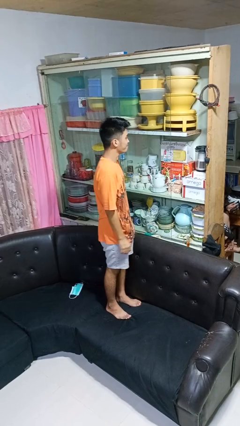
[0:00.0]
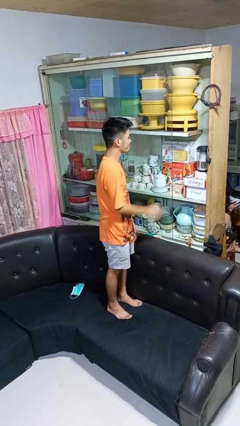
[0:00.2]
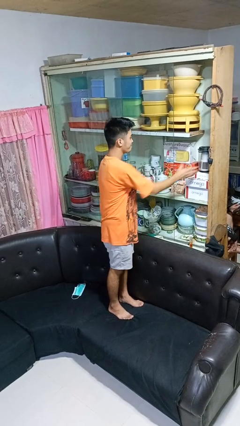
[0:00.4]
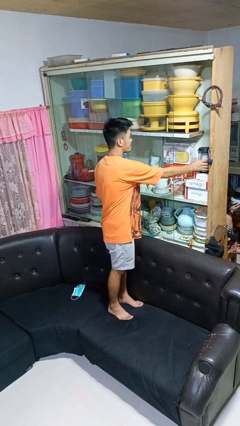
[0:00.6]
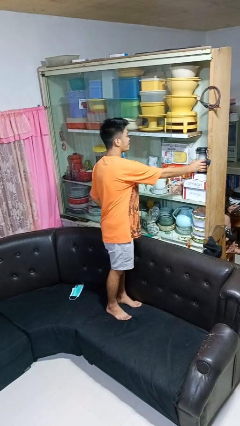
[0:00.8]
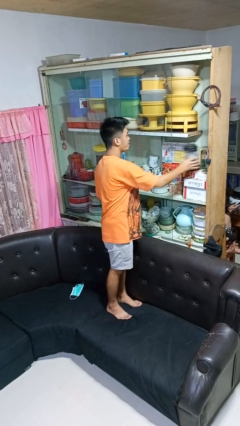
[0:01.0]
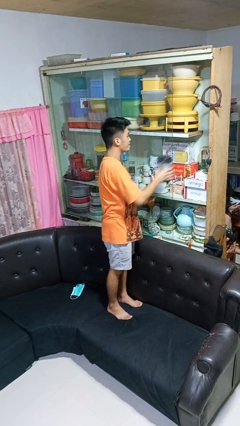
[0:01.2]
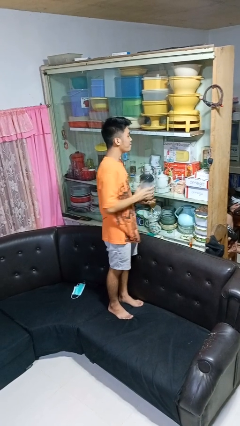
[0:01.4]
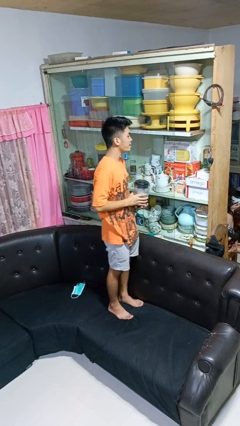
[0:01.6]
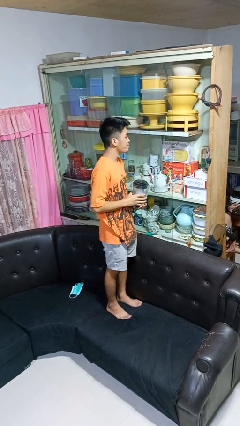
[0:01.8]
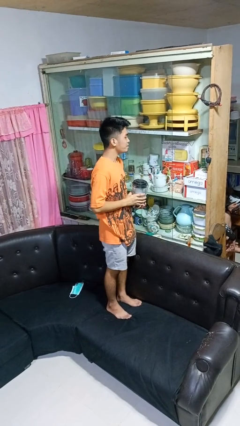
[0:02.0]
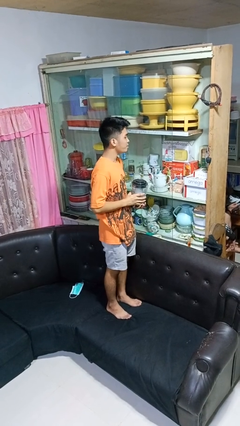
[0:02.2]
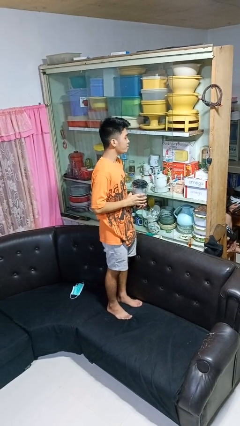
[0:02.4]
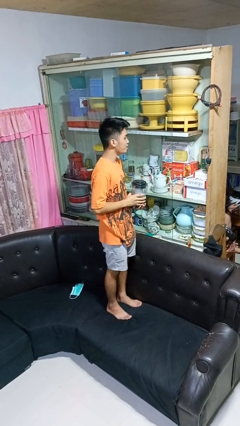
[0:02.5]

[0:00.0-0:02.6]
person picks up object from cabinet

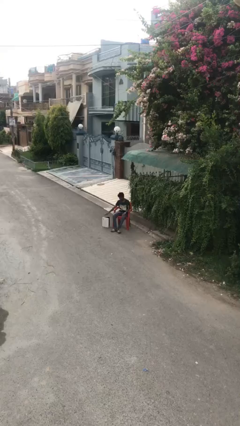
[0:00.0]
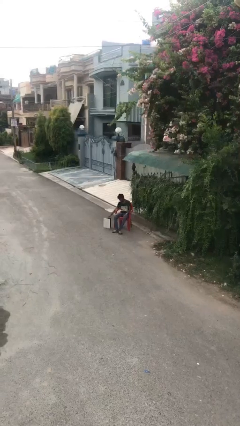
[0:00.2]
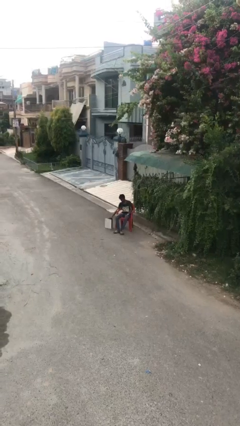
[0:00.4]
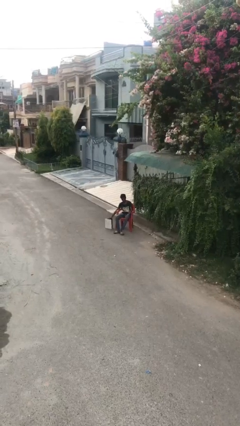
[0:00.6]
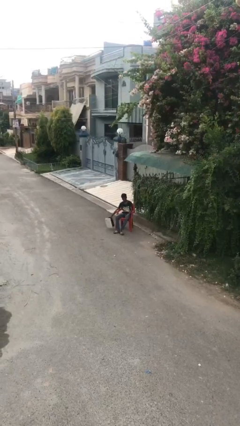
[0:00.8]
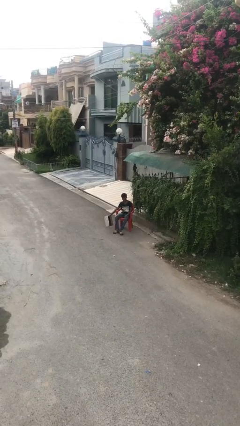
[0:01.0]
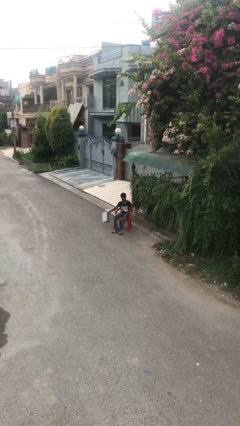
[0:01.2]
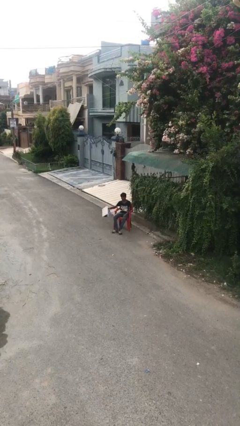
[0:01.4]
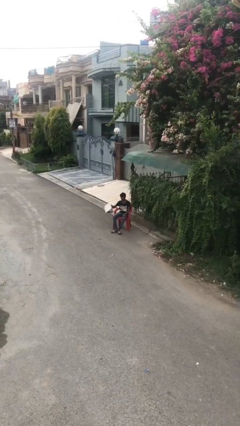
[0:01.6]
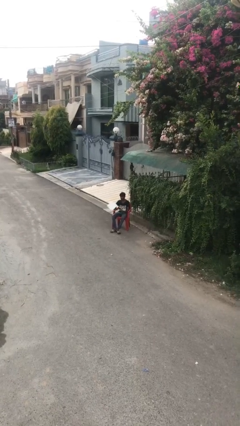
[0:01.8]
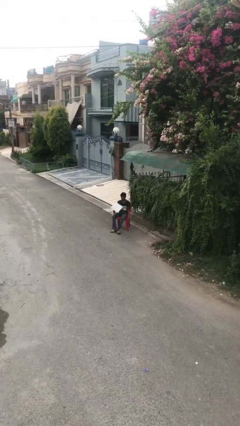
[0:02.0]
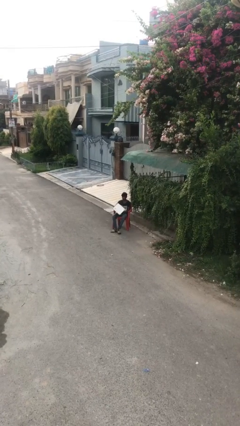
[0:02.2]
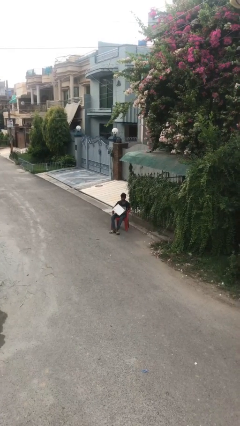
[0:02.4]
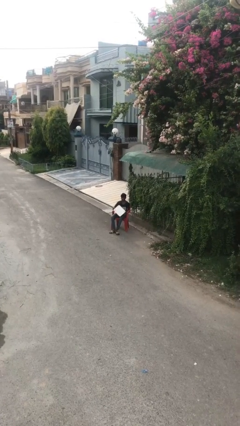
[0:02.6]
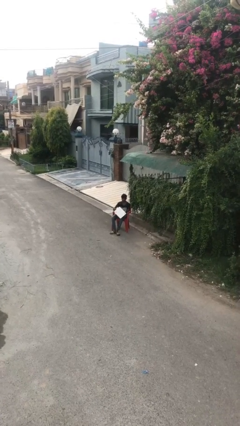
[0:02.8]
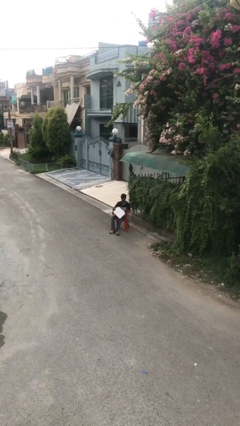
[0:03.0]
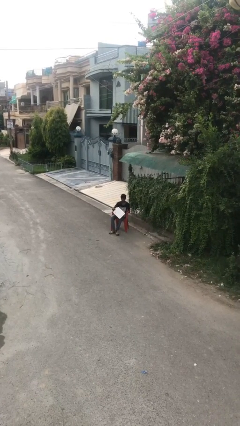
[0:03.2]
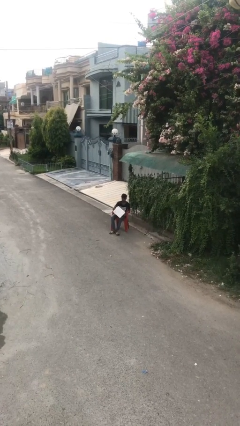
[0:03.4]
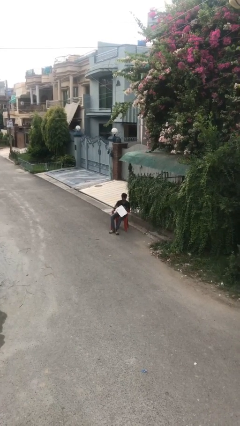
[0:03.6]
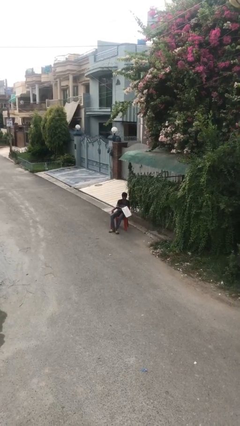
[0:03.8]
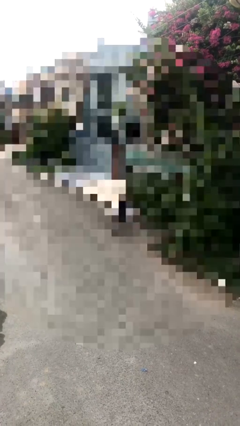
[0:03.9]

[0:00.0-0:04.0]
person picks up object from floor

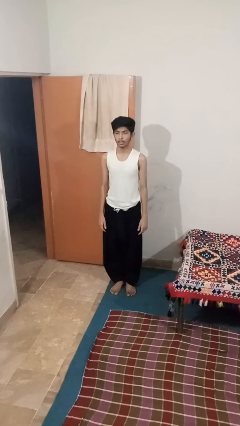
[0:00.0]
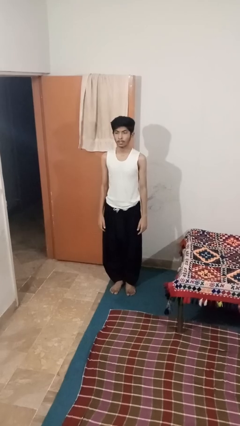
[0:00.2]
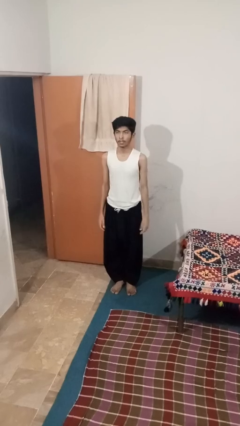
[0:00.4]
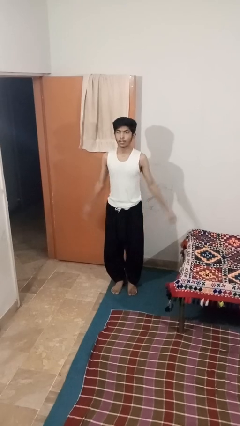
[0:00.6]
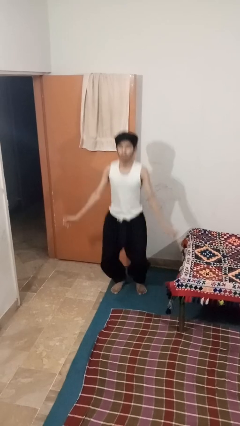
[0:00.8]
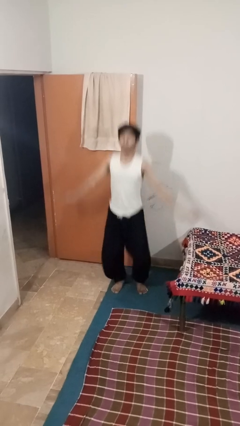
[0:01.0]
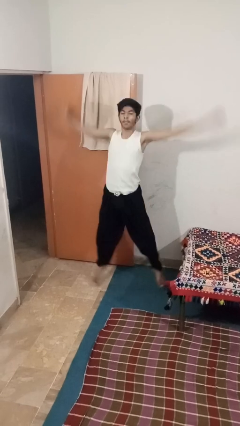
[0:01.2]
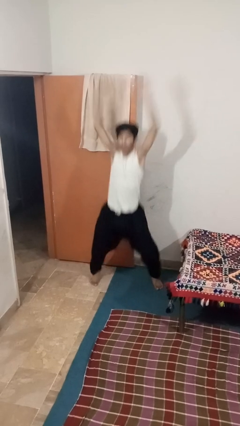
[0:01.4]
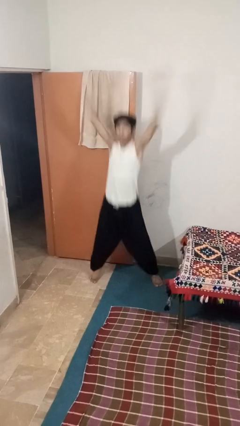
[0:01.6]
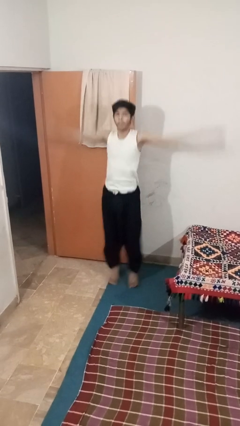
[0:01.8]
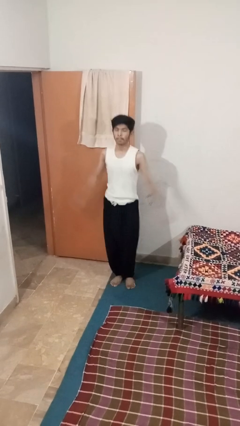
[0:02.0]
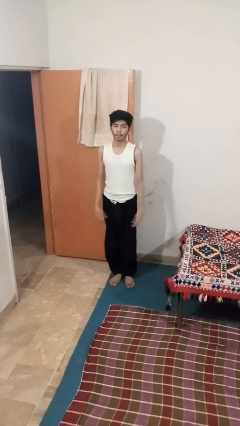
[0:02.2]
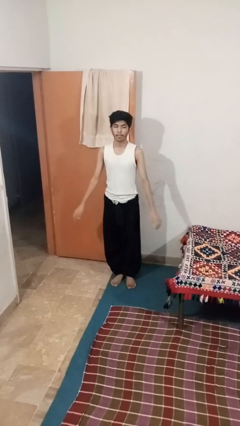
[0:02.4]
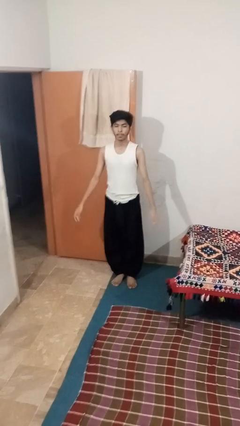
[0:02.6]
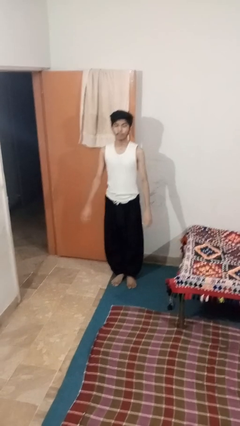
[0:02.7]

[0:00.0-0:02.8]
person exercises with jumping jacks

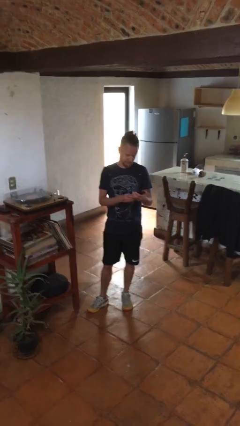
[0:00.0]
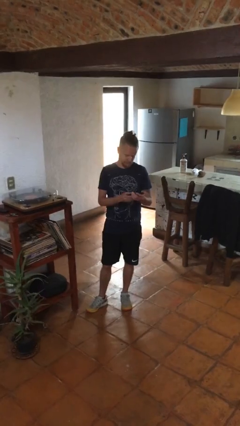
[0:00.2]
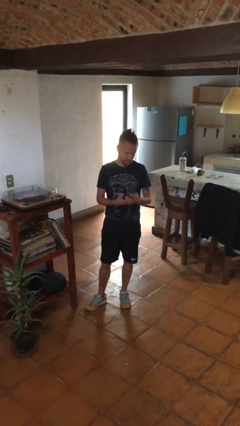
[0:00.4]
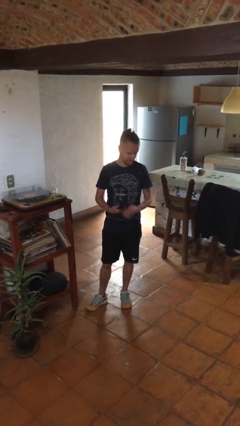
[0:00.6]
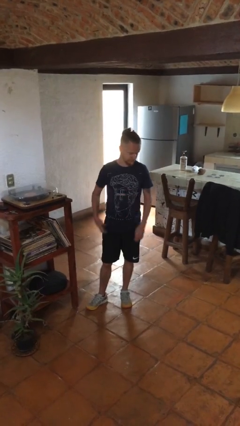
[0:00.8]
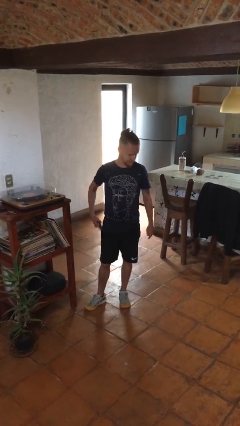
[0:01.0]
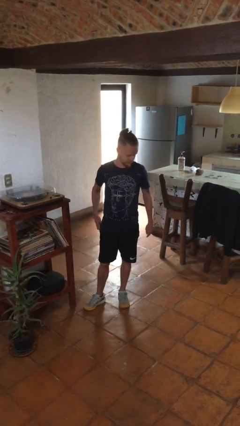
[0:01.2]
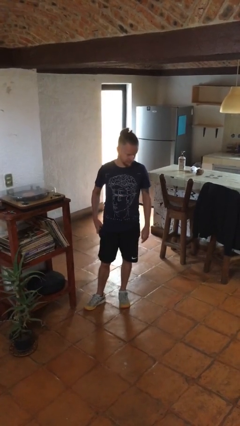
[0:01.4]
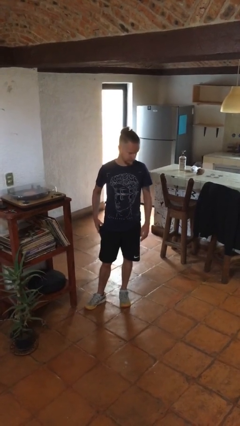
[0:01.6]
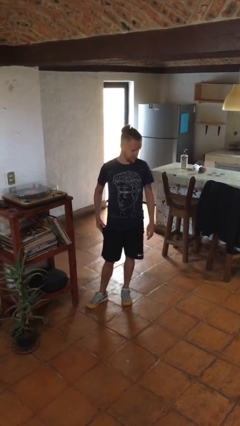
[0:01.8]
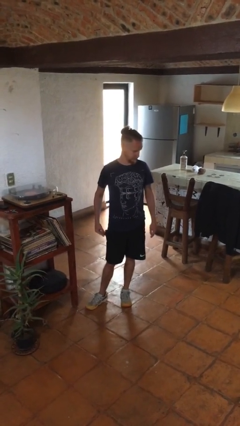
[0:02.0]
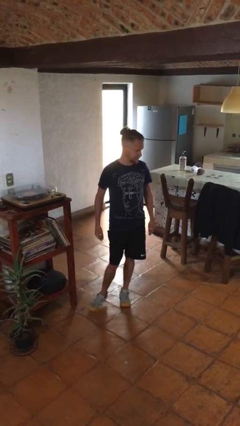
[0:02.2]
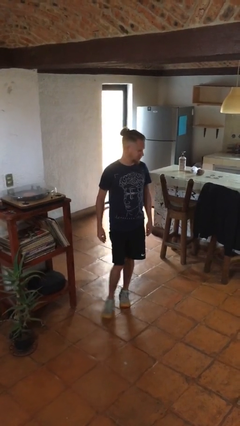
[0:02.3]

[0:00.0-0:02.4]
person puts phone into pocket

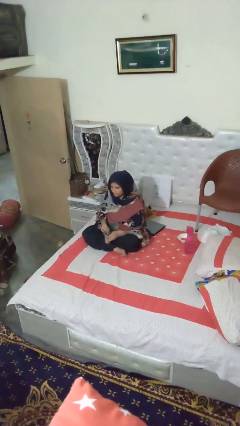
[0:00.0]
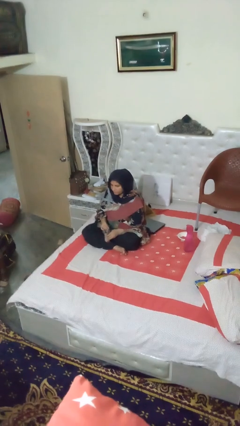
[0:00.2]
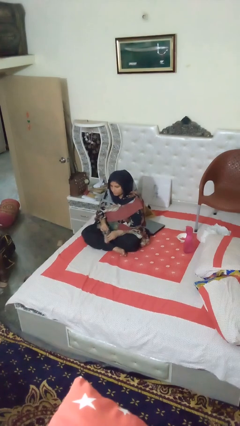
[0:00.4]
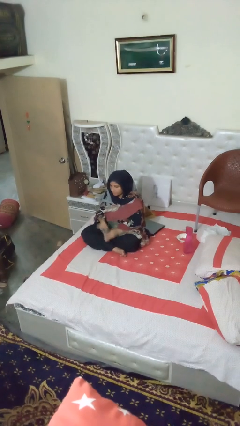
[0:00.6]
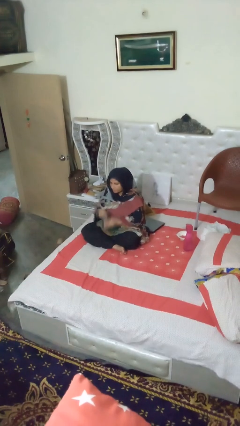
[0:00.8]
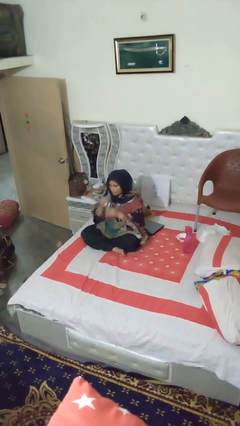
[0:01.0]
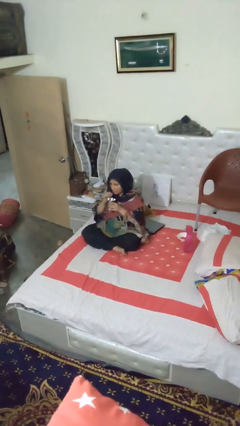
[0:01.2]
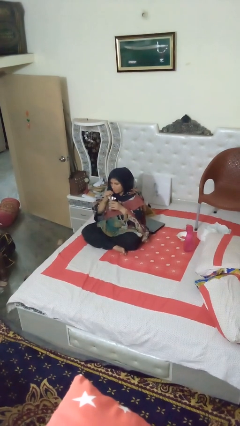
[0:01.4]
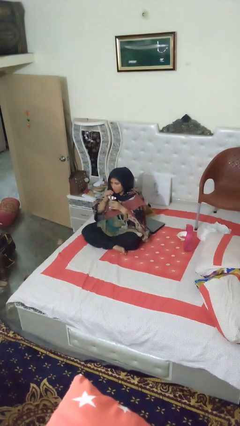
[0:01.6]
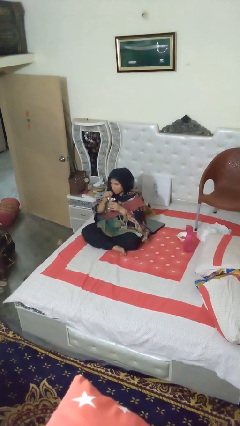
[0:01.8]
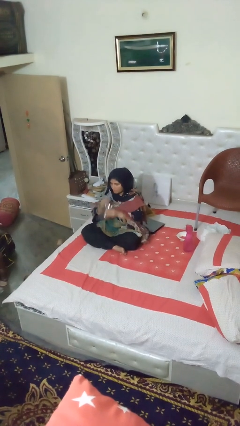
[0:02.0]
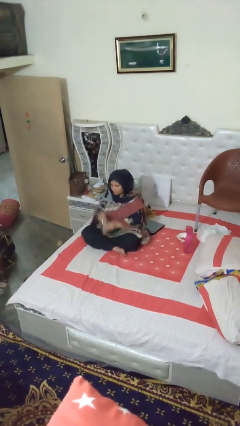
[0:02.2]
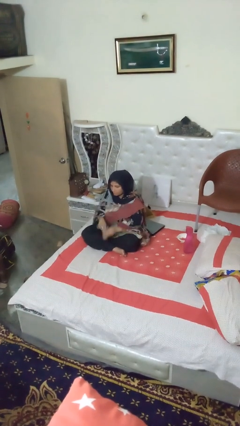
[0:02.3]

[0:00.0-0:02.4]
person drinks from straw

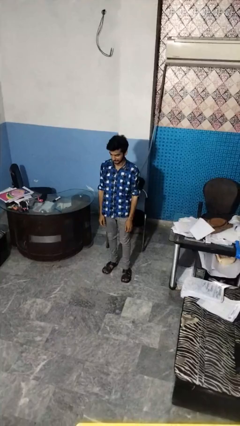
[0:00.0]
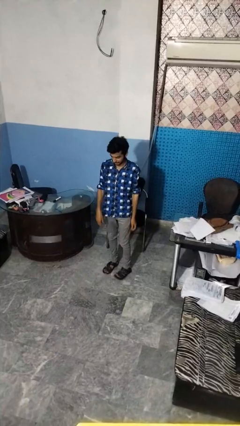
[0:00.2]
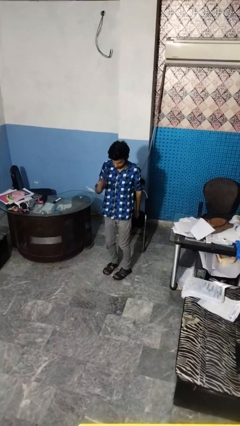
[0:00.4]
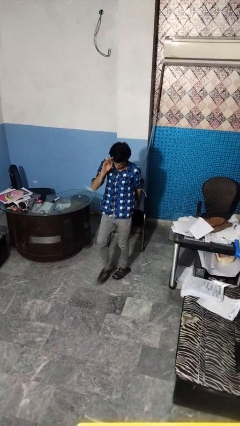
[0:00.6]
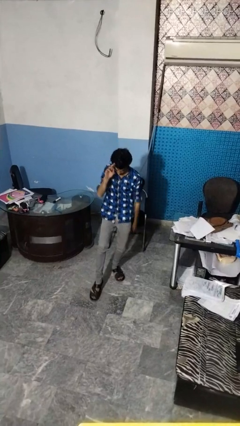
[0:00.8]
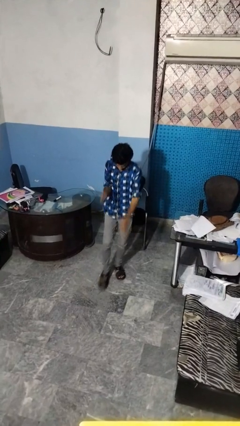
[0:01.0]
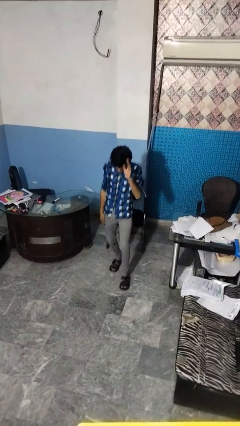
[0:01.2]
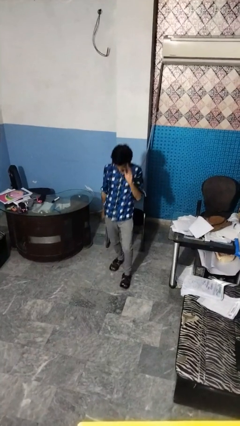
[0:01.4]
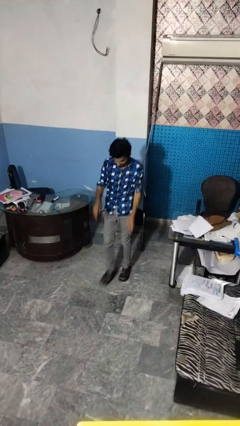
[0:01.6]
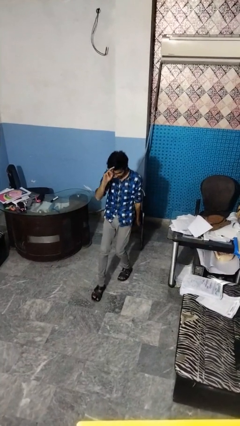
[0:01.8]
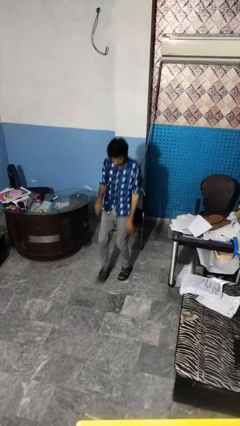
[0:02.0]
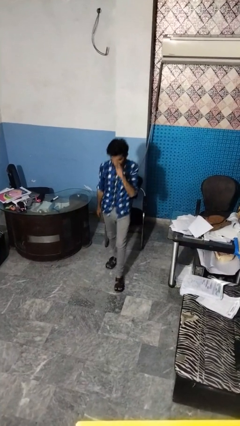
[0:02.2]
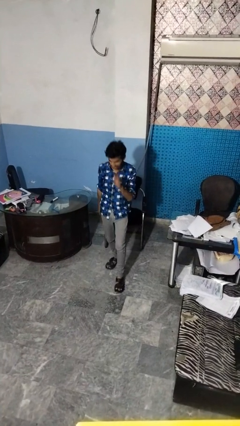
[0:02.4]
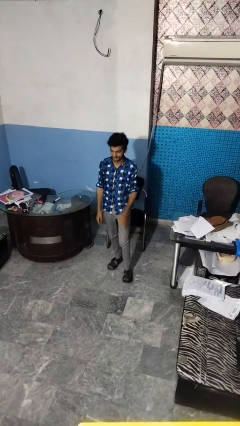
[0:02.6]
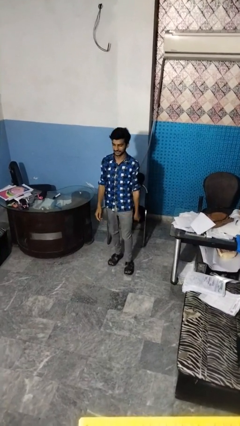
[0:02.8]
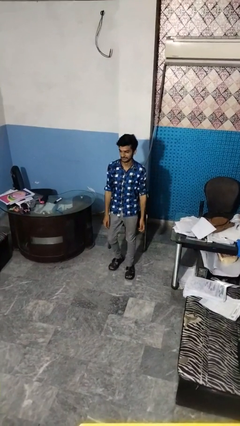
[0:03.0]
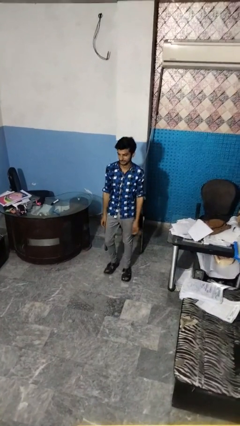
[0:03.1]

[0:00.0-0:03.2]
person dances in place

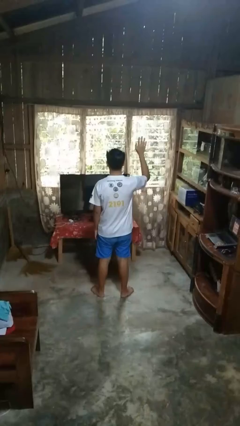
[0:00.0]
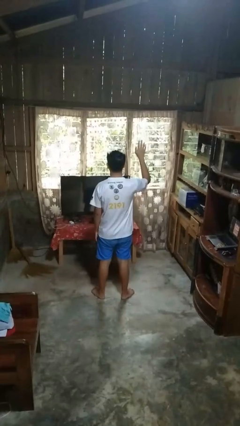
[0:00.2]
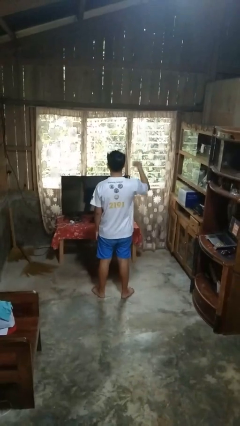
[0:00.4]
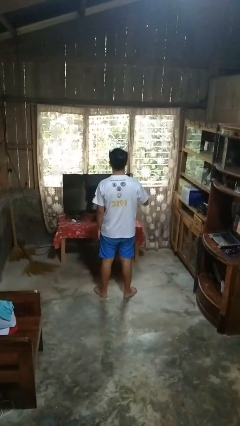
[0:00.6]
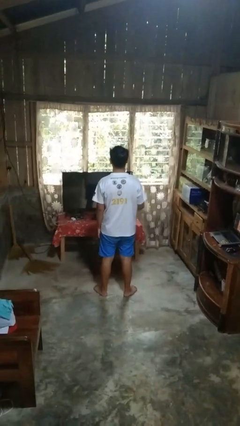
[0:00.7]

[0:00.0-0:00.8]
person gestures lower hand
